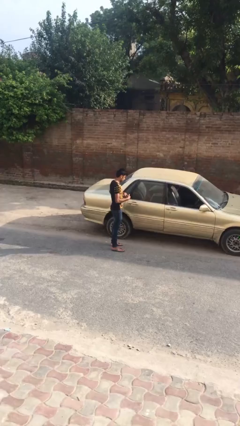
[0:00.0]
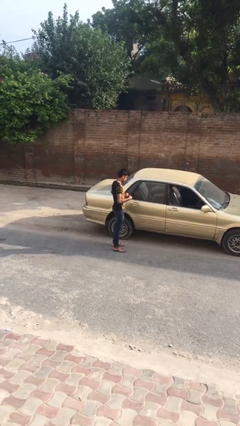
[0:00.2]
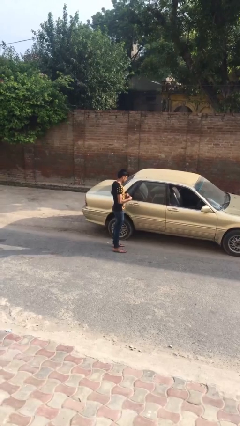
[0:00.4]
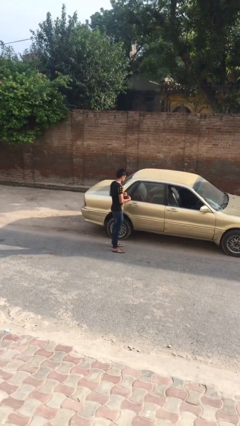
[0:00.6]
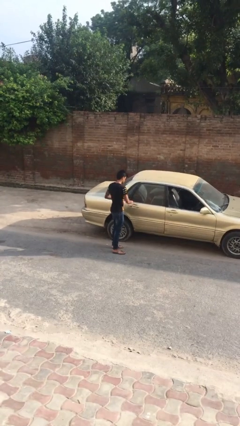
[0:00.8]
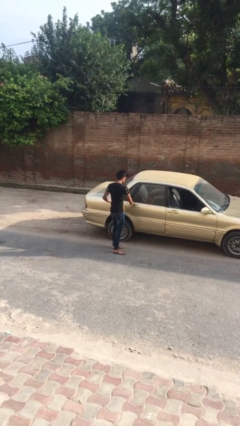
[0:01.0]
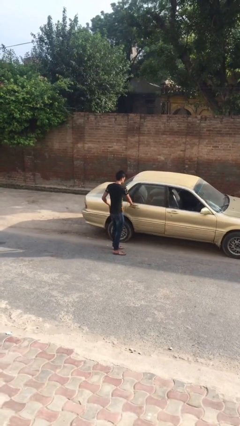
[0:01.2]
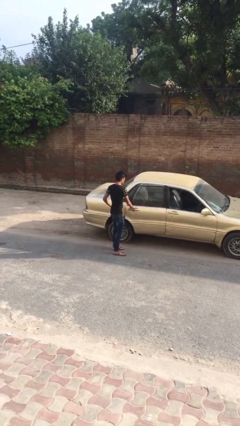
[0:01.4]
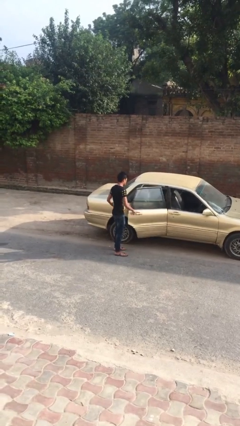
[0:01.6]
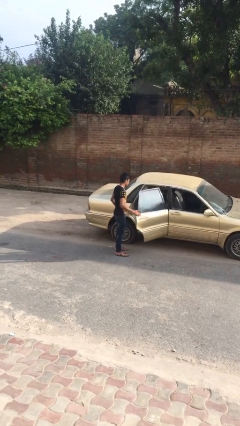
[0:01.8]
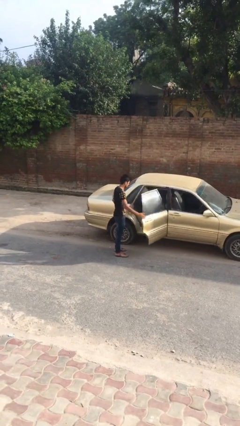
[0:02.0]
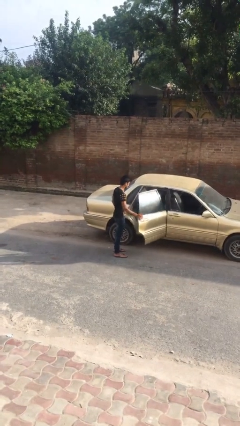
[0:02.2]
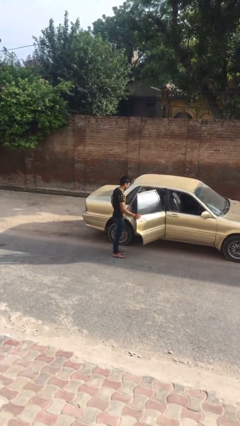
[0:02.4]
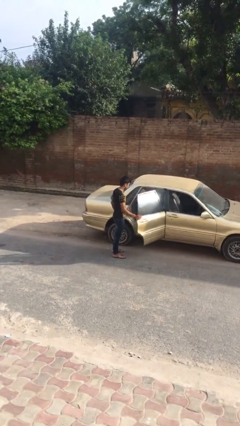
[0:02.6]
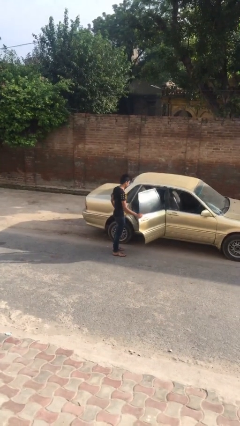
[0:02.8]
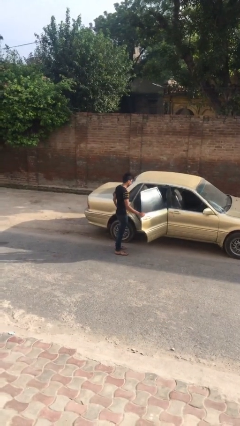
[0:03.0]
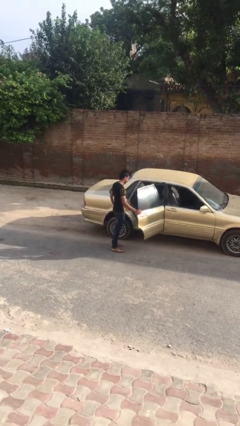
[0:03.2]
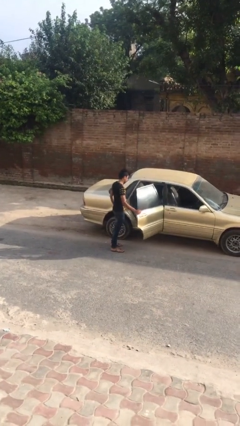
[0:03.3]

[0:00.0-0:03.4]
person opens car door

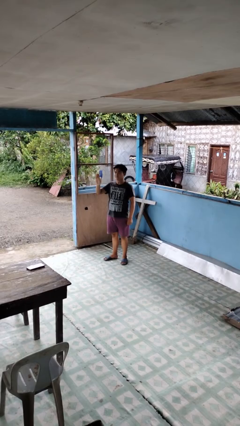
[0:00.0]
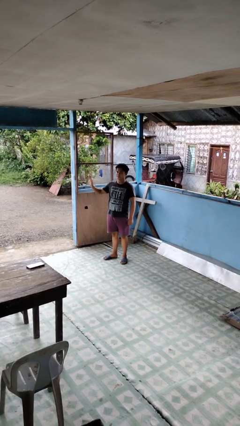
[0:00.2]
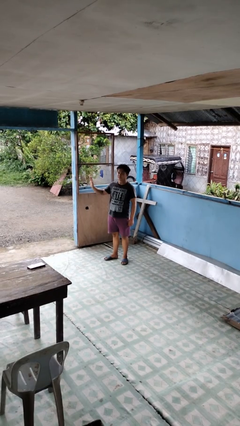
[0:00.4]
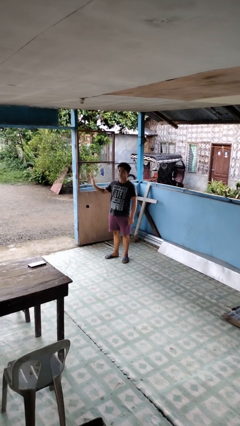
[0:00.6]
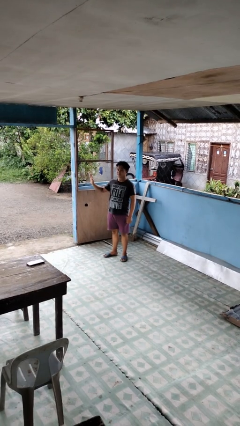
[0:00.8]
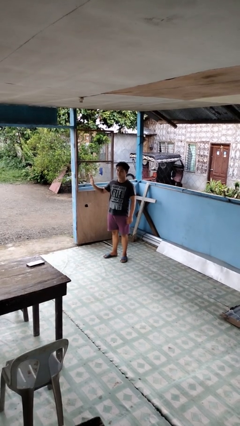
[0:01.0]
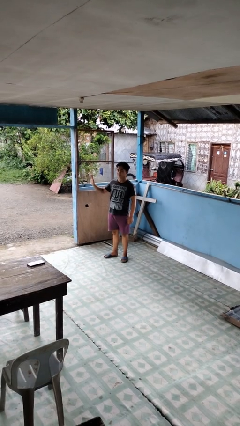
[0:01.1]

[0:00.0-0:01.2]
person gestures swipe right

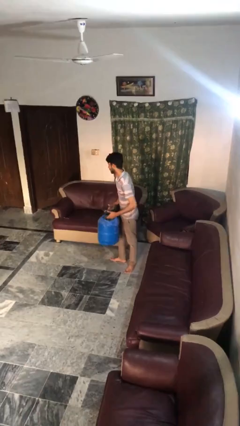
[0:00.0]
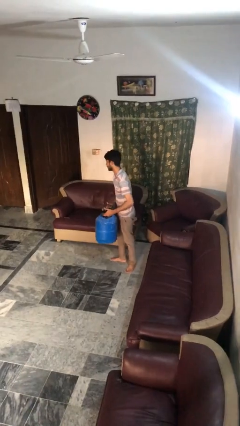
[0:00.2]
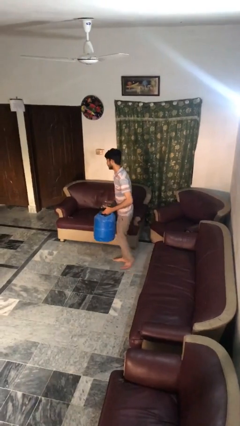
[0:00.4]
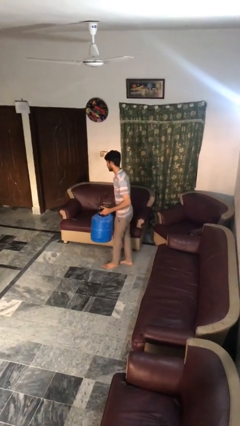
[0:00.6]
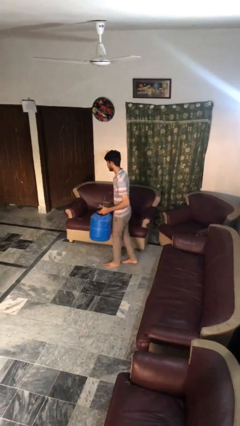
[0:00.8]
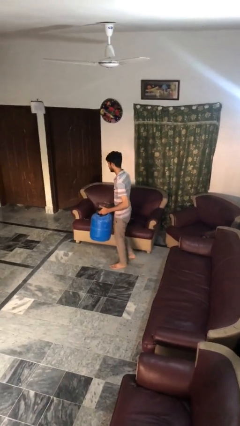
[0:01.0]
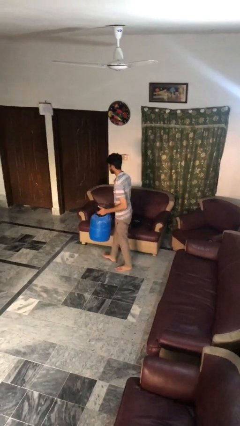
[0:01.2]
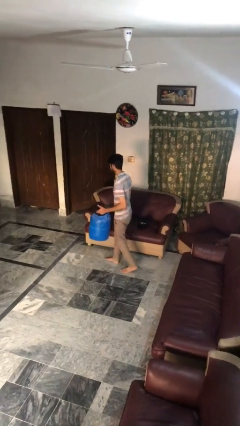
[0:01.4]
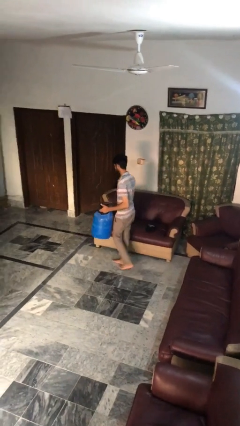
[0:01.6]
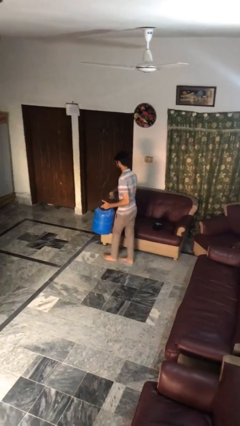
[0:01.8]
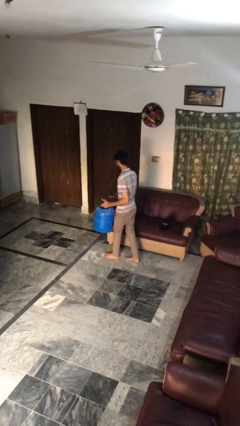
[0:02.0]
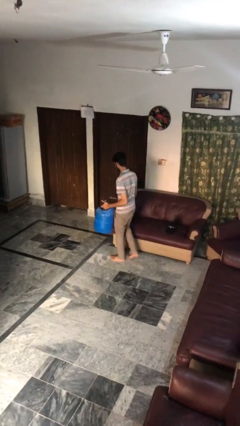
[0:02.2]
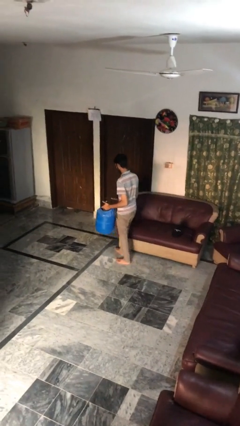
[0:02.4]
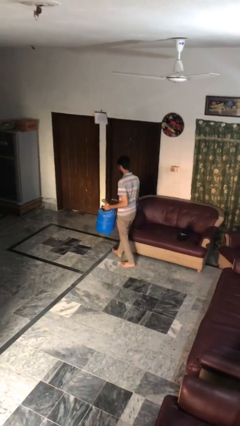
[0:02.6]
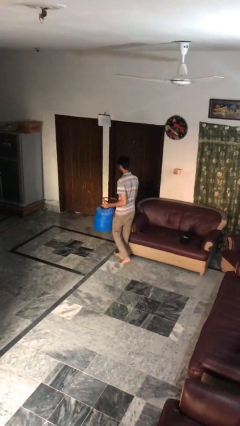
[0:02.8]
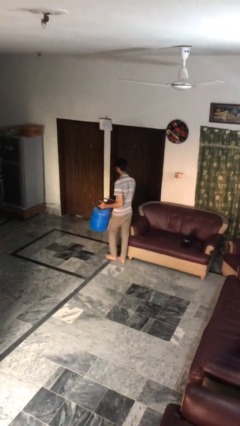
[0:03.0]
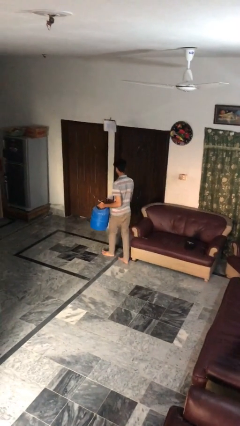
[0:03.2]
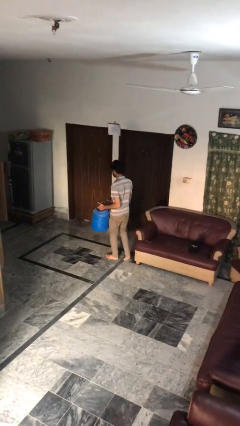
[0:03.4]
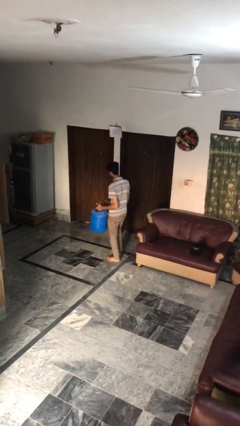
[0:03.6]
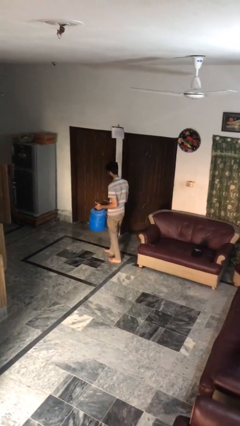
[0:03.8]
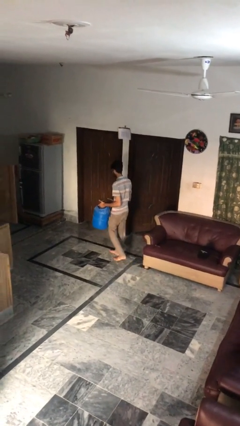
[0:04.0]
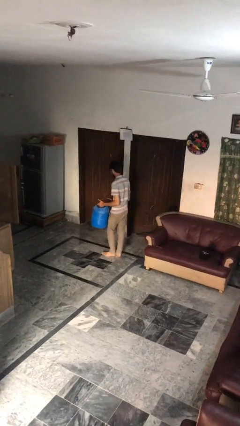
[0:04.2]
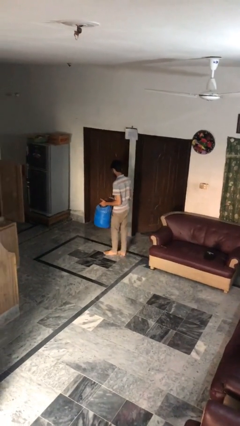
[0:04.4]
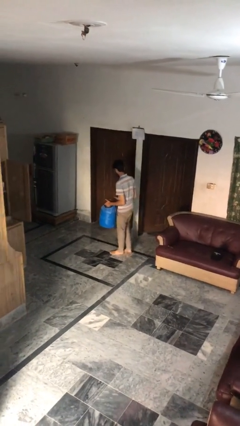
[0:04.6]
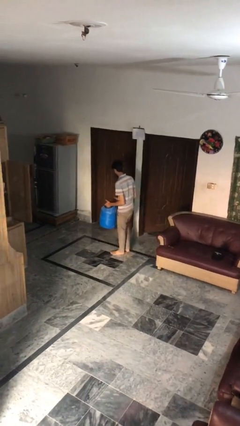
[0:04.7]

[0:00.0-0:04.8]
person carries heavy object

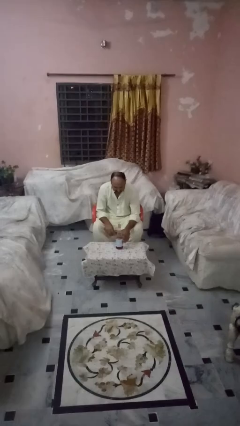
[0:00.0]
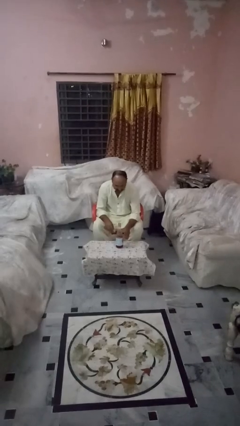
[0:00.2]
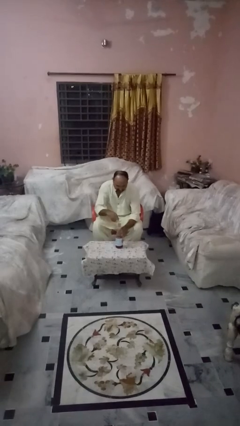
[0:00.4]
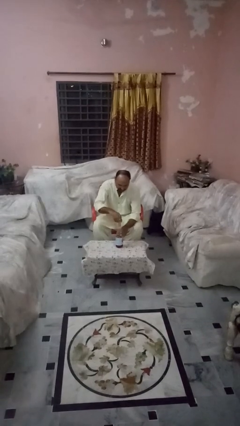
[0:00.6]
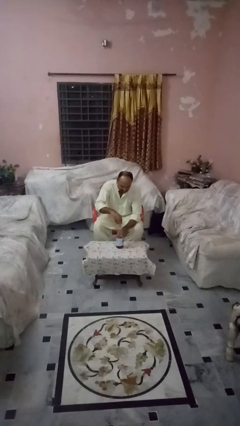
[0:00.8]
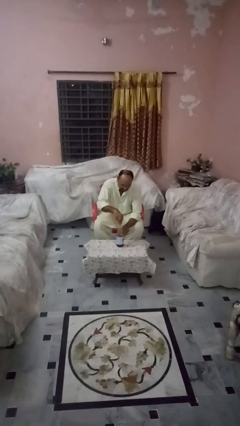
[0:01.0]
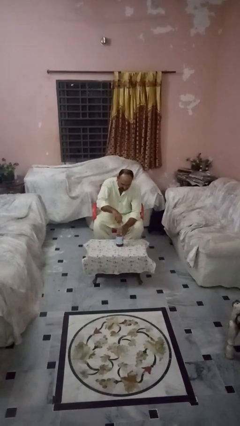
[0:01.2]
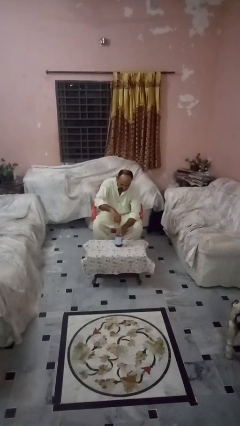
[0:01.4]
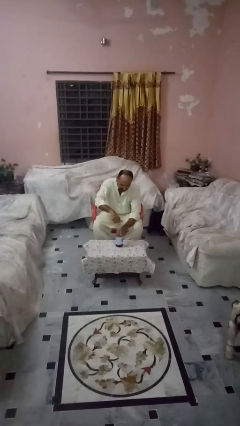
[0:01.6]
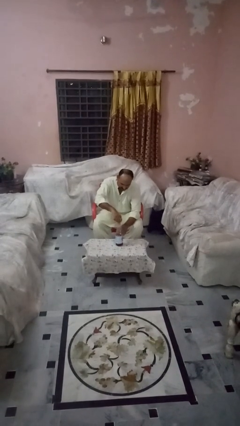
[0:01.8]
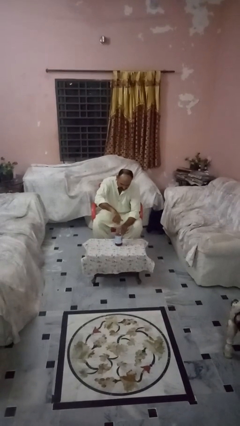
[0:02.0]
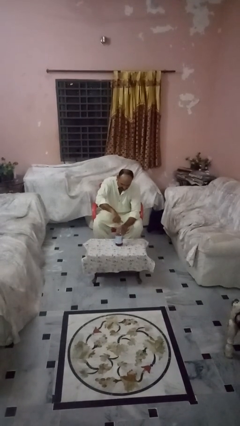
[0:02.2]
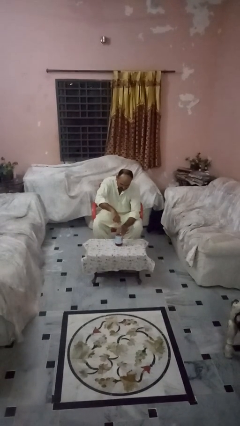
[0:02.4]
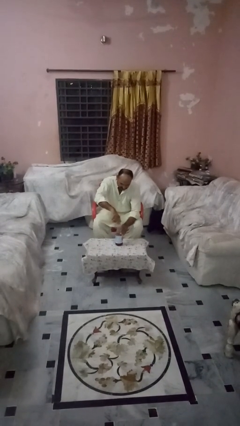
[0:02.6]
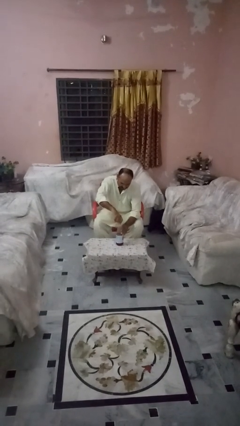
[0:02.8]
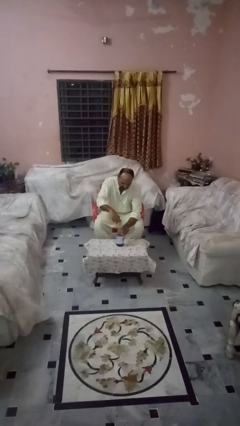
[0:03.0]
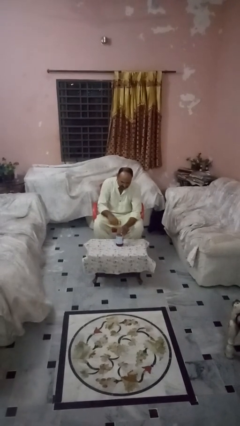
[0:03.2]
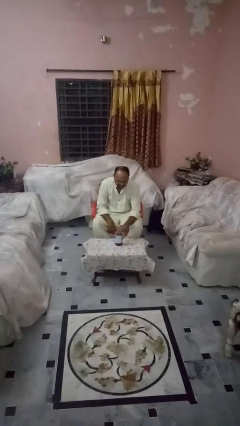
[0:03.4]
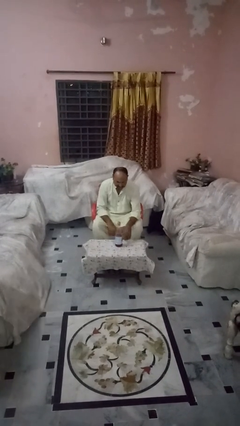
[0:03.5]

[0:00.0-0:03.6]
person screws lid to bottle

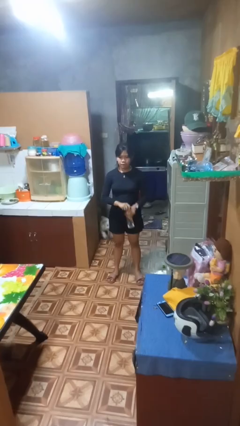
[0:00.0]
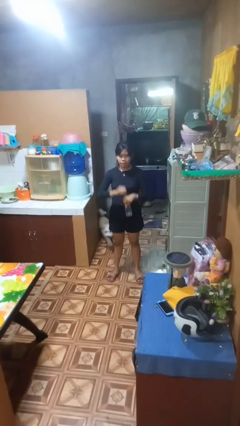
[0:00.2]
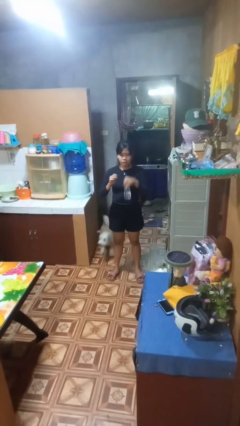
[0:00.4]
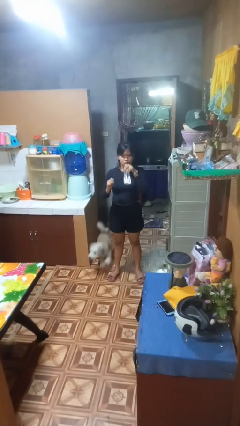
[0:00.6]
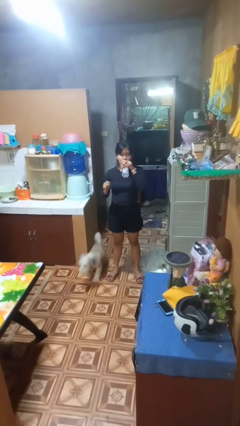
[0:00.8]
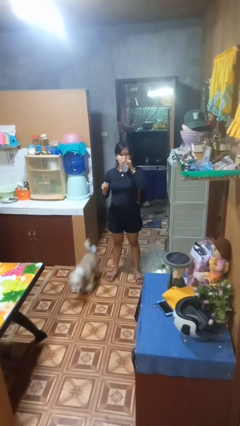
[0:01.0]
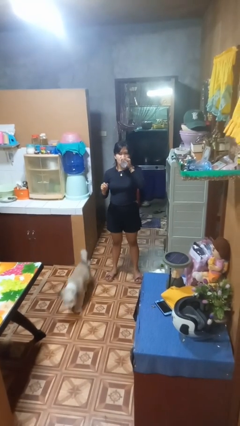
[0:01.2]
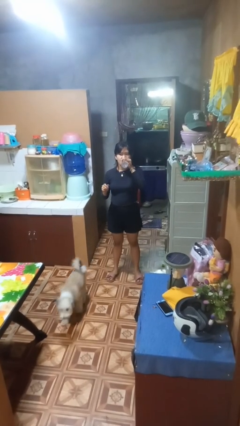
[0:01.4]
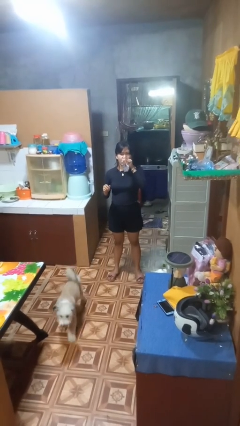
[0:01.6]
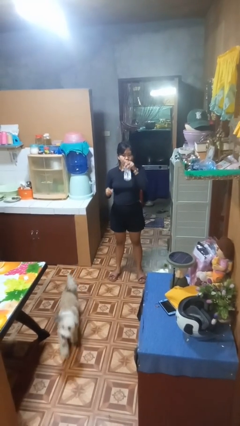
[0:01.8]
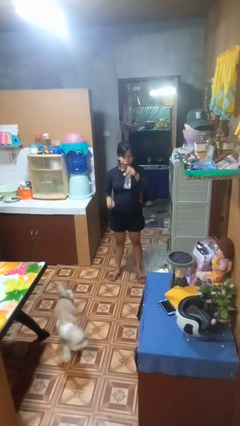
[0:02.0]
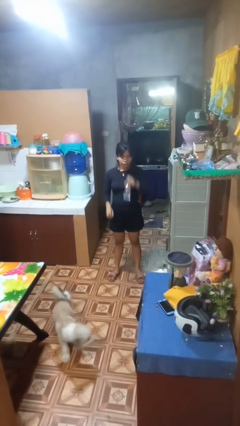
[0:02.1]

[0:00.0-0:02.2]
person drinks from bottle

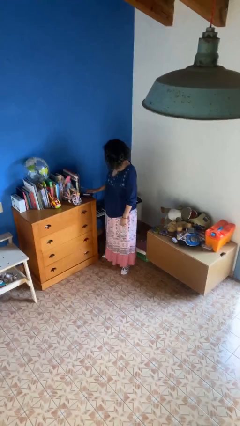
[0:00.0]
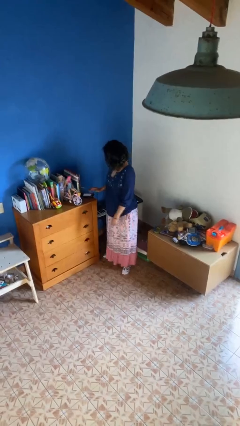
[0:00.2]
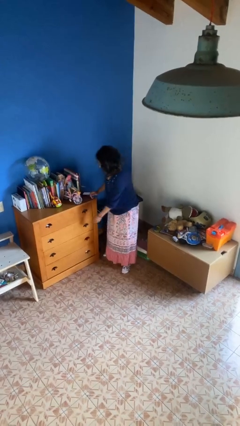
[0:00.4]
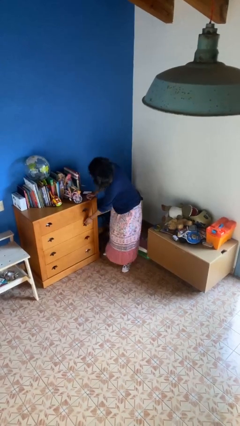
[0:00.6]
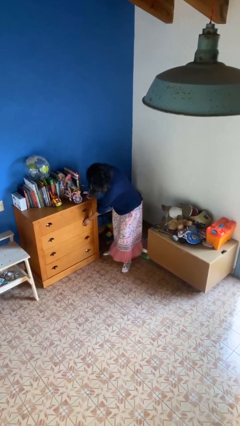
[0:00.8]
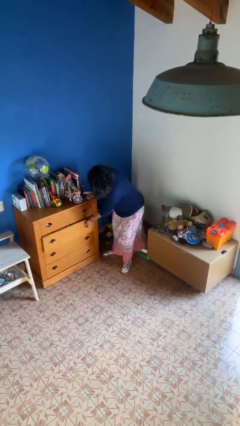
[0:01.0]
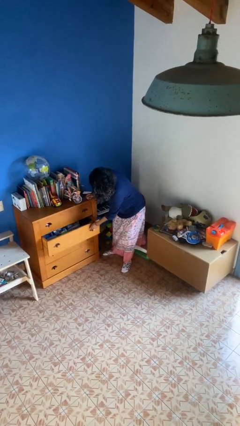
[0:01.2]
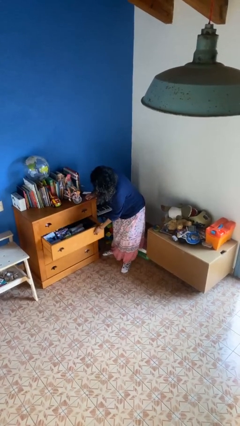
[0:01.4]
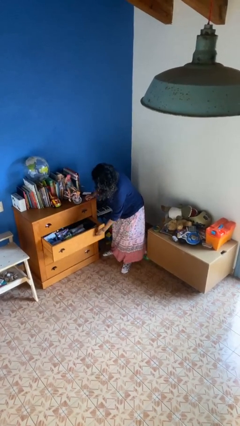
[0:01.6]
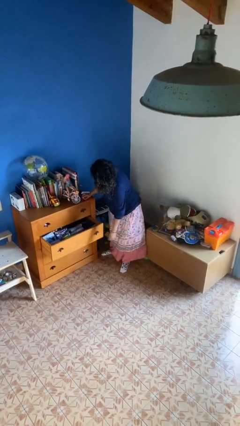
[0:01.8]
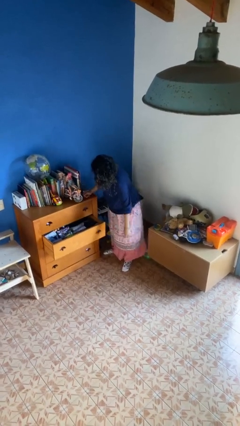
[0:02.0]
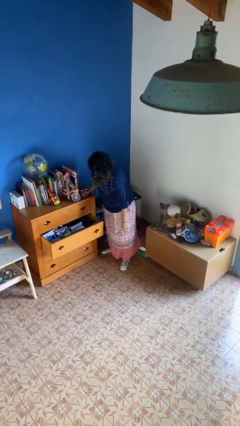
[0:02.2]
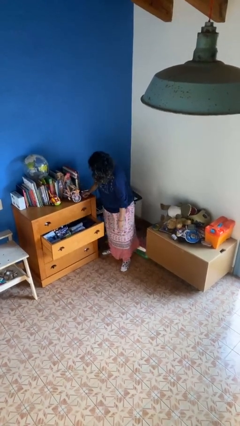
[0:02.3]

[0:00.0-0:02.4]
person opens dresser drawer
